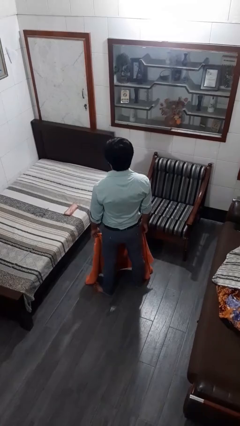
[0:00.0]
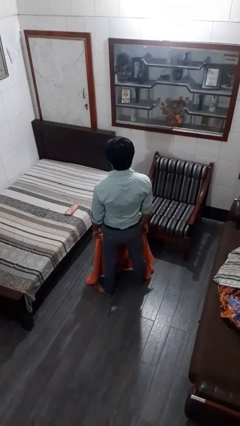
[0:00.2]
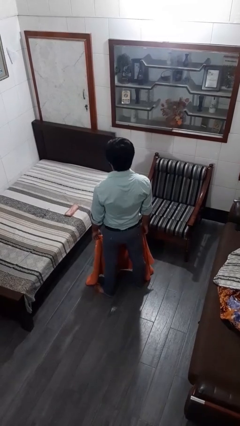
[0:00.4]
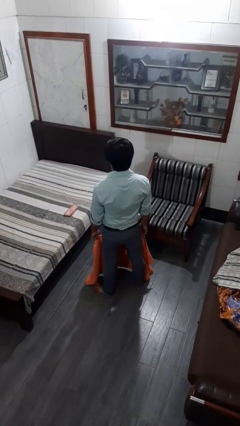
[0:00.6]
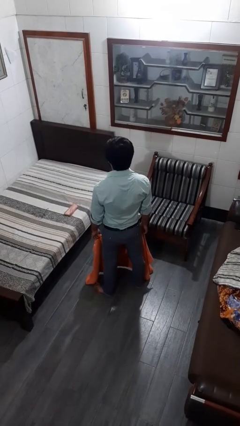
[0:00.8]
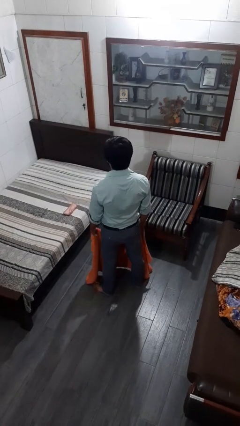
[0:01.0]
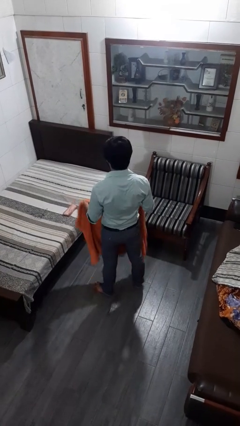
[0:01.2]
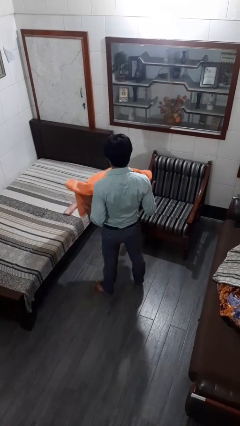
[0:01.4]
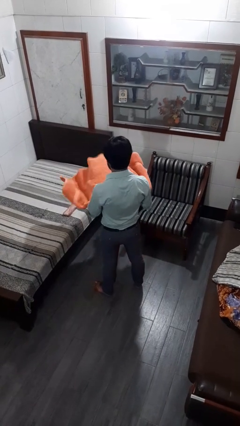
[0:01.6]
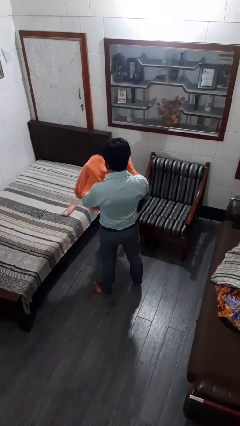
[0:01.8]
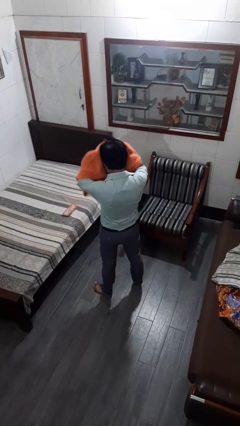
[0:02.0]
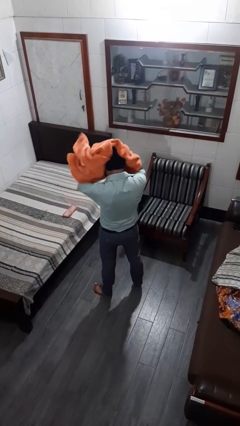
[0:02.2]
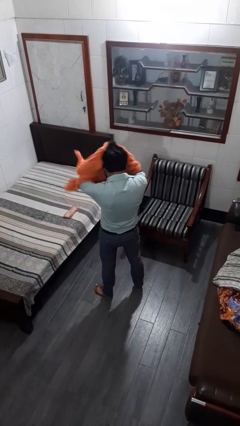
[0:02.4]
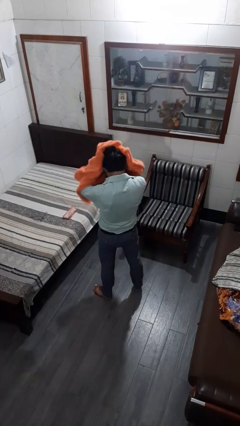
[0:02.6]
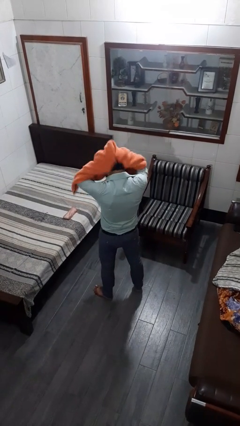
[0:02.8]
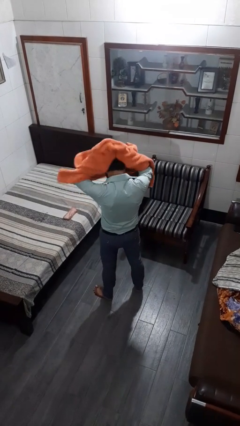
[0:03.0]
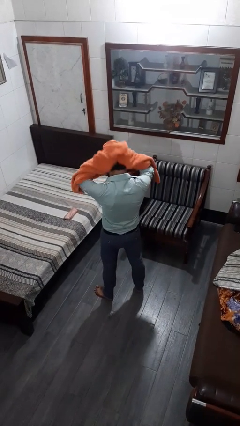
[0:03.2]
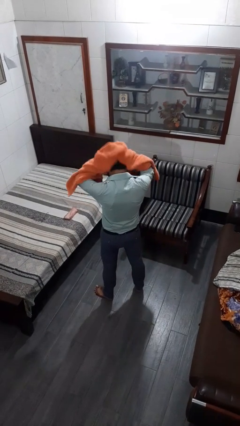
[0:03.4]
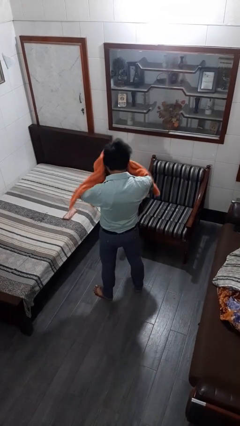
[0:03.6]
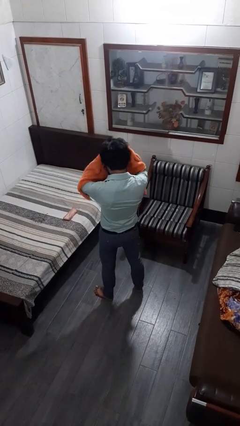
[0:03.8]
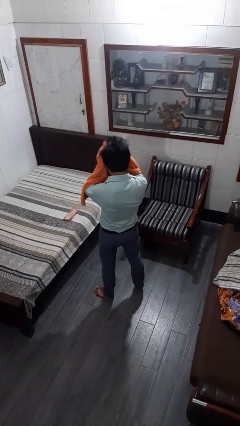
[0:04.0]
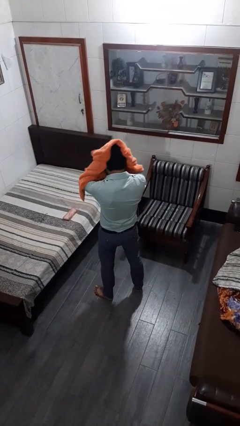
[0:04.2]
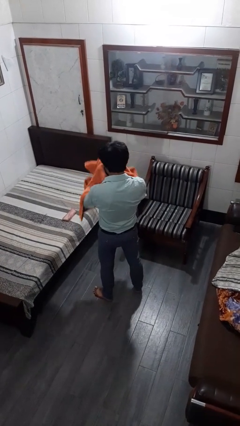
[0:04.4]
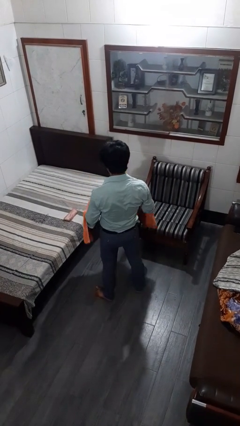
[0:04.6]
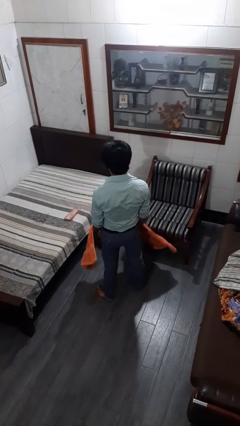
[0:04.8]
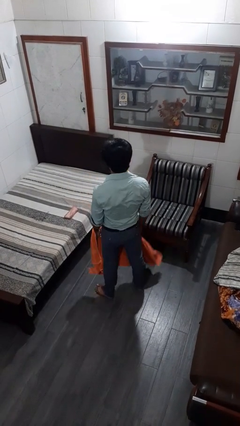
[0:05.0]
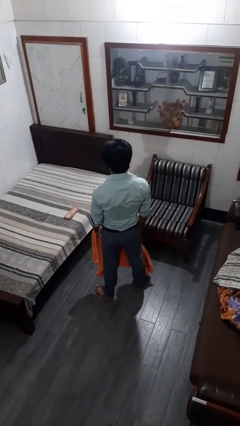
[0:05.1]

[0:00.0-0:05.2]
person dries hair with towel

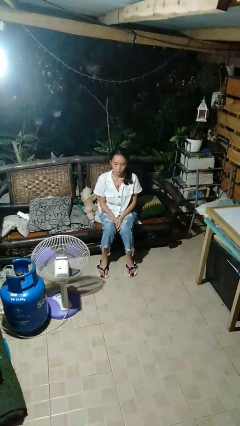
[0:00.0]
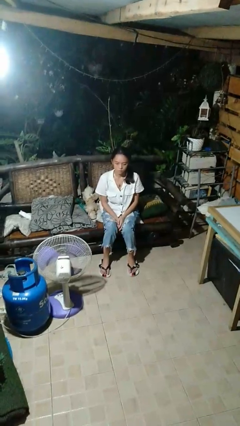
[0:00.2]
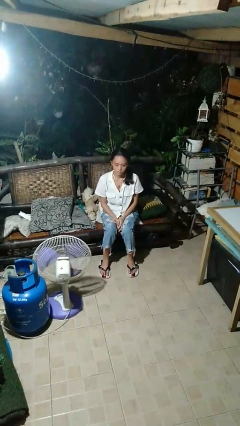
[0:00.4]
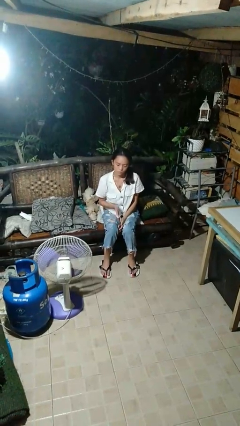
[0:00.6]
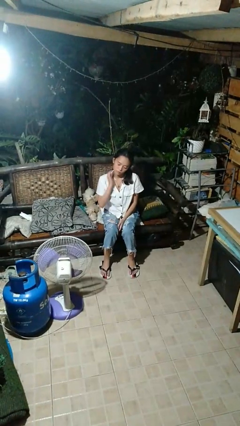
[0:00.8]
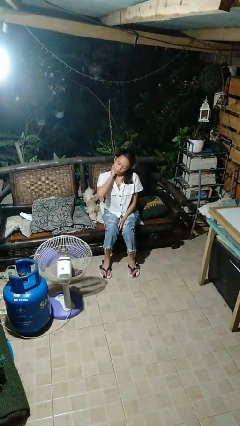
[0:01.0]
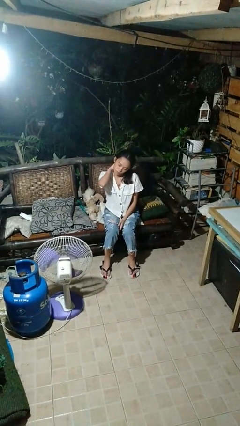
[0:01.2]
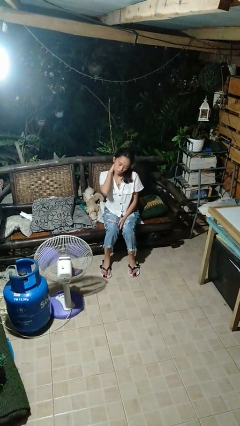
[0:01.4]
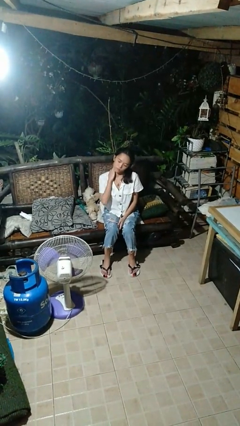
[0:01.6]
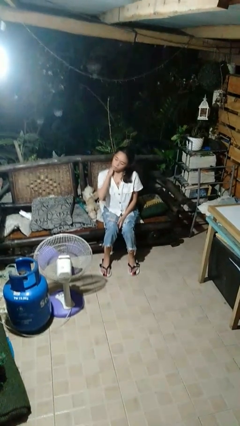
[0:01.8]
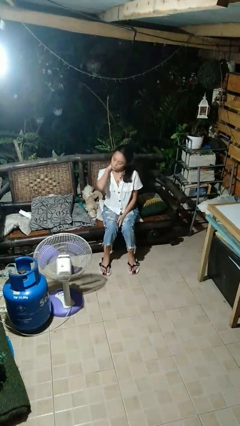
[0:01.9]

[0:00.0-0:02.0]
person rubs neck

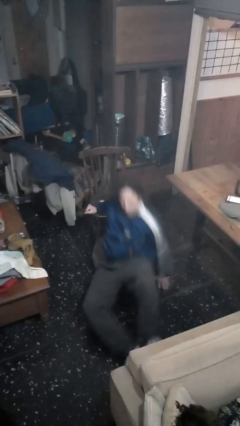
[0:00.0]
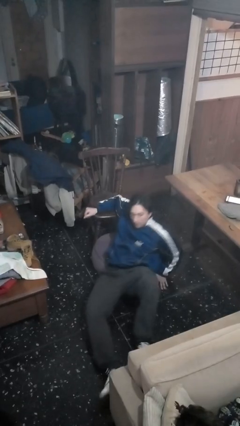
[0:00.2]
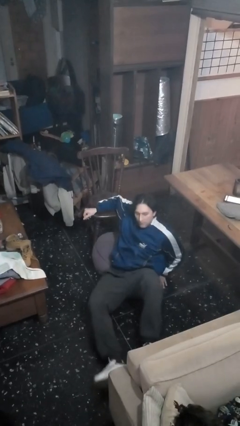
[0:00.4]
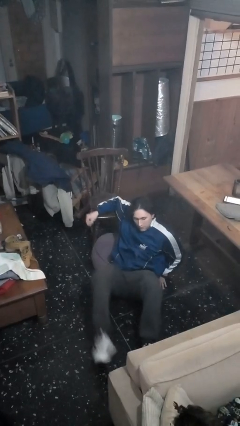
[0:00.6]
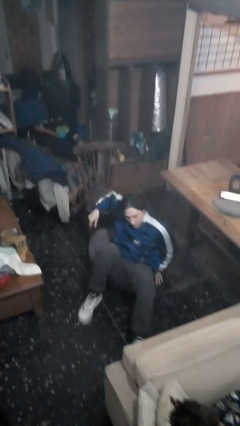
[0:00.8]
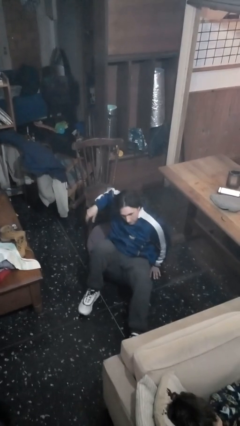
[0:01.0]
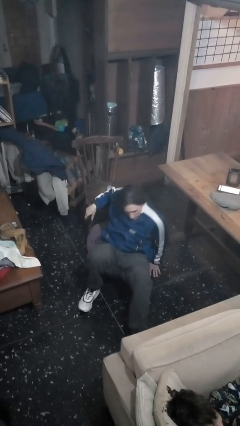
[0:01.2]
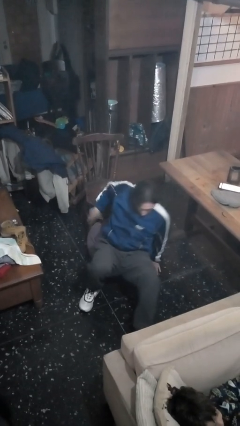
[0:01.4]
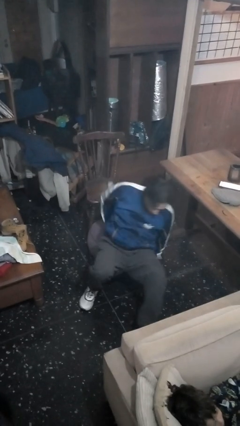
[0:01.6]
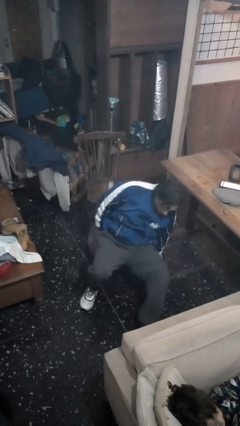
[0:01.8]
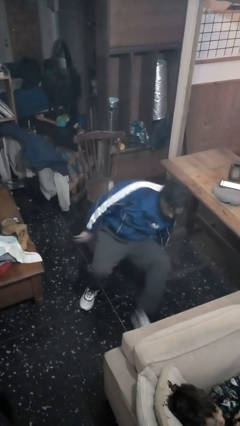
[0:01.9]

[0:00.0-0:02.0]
person falls from chair

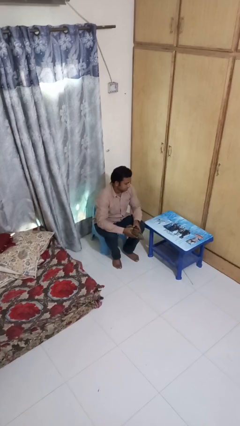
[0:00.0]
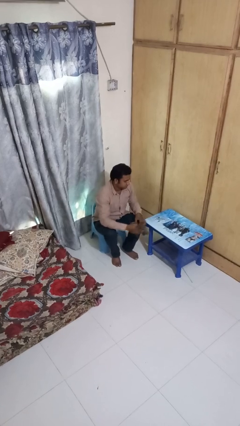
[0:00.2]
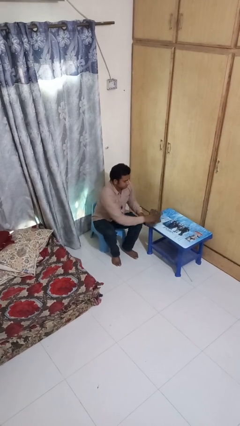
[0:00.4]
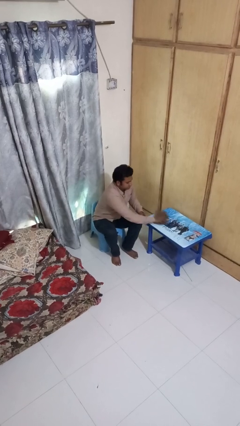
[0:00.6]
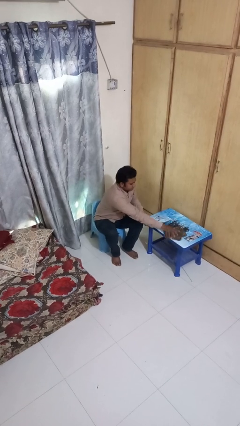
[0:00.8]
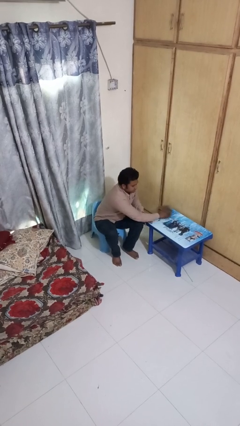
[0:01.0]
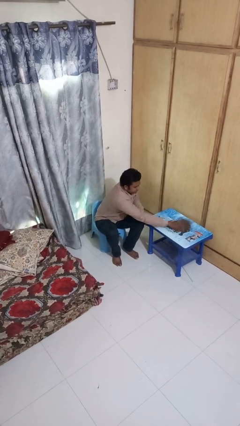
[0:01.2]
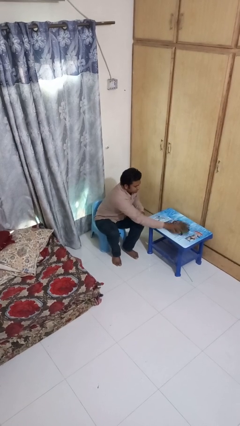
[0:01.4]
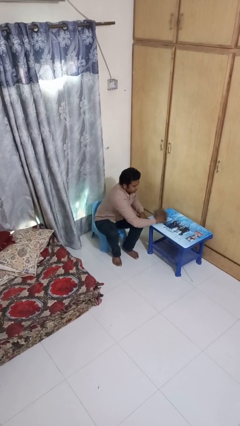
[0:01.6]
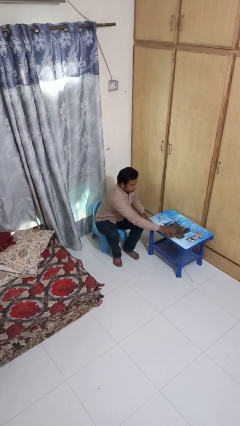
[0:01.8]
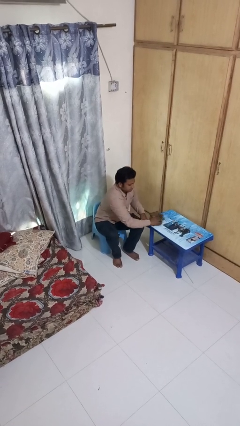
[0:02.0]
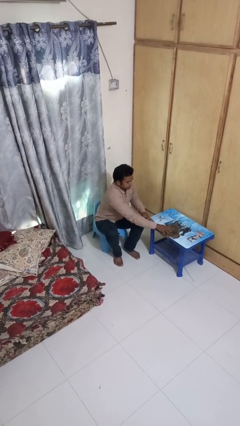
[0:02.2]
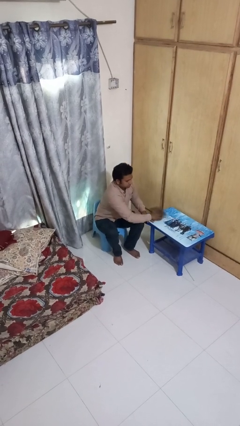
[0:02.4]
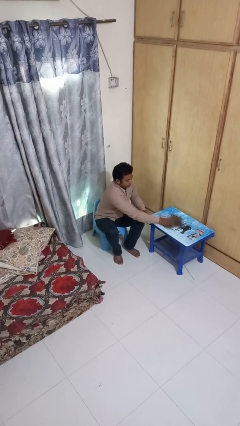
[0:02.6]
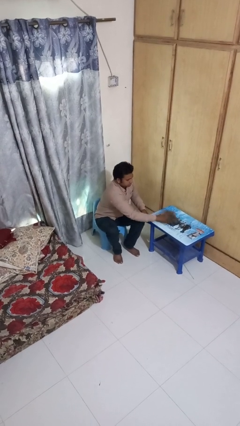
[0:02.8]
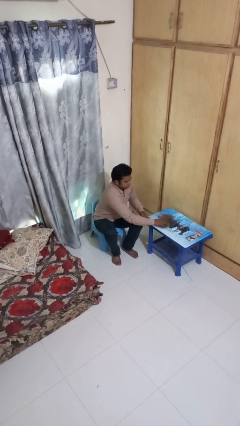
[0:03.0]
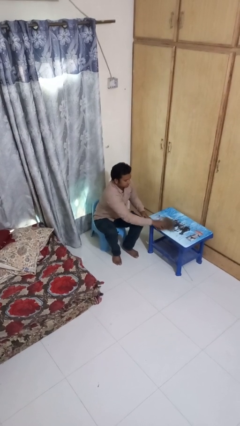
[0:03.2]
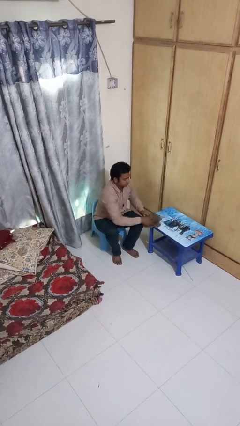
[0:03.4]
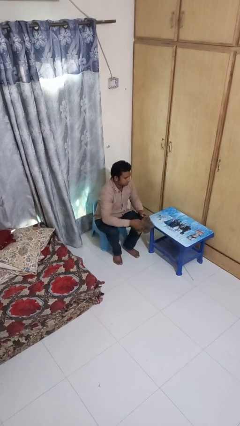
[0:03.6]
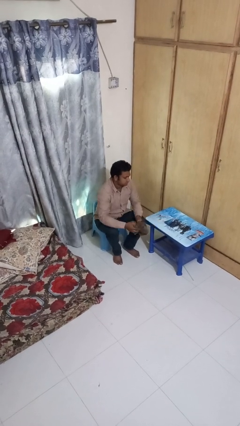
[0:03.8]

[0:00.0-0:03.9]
person cleans table with rag

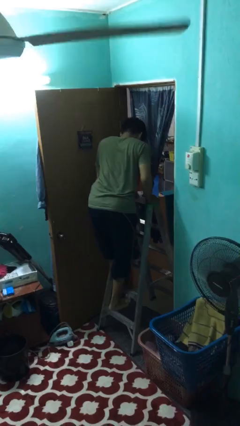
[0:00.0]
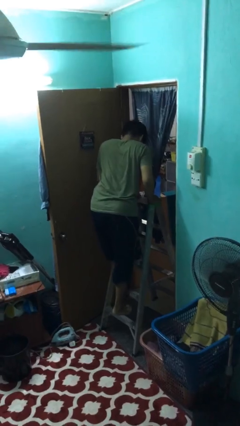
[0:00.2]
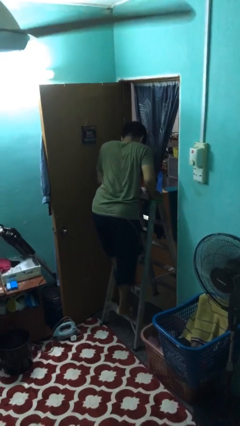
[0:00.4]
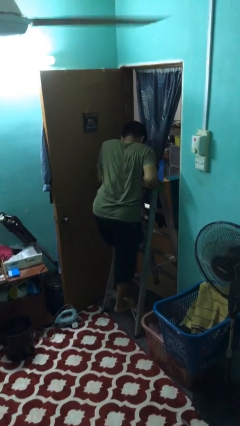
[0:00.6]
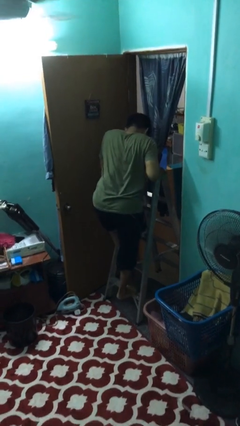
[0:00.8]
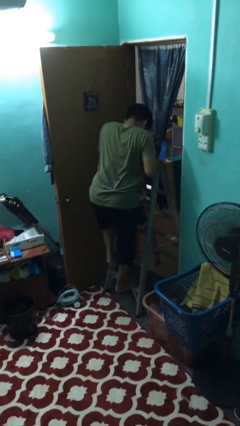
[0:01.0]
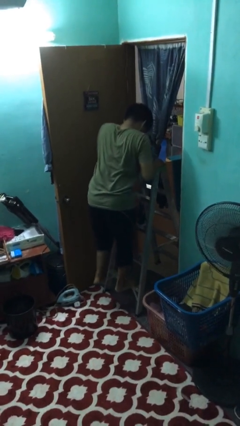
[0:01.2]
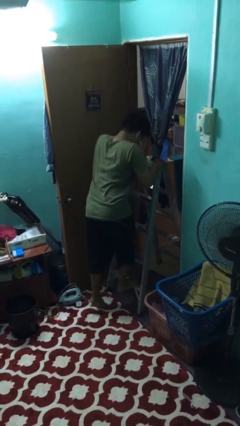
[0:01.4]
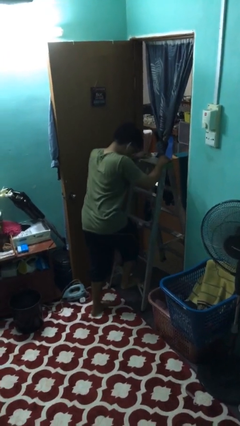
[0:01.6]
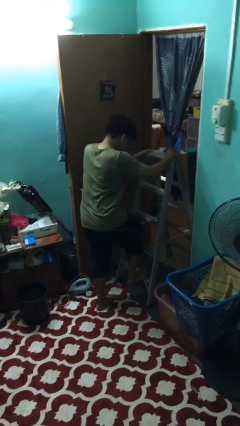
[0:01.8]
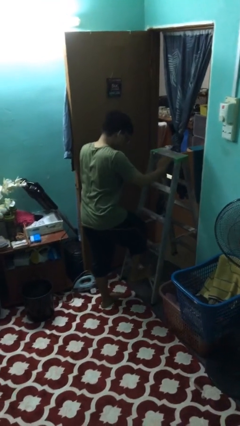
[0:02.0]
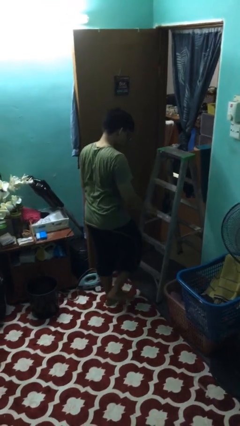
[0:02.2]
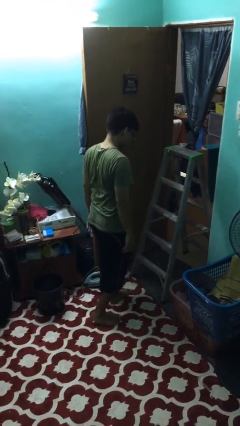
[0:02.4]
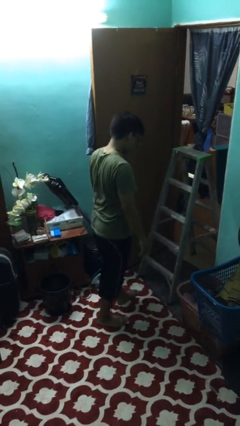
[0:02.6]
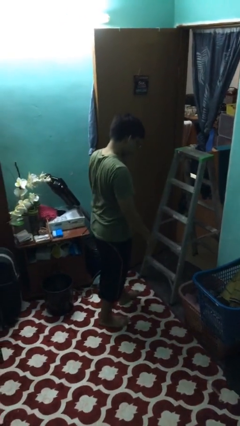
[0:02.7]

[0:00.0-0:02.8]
person climbs down ladder

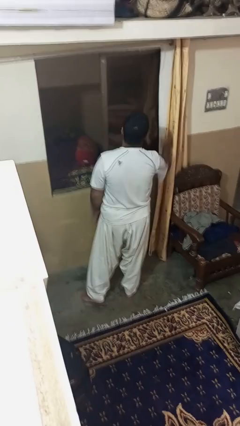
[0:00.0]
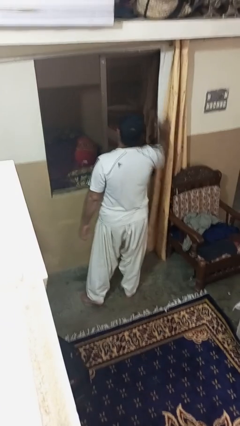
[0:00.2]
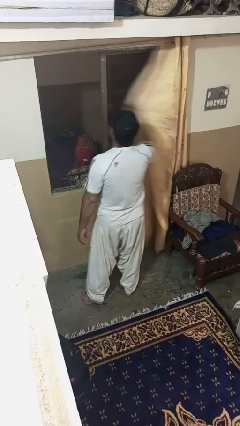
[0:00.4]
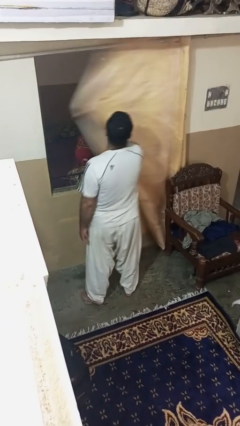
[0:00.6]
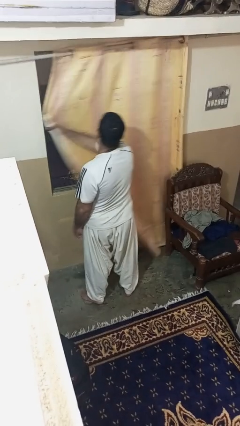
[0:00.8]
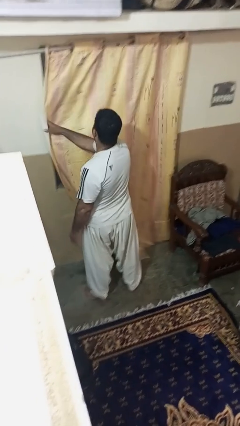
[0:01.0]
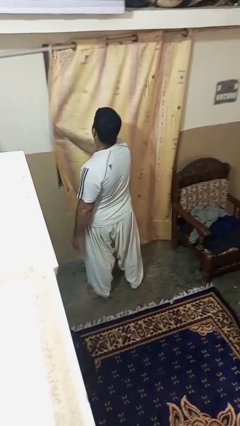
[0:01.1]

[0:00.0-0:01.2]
person closes curtains

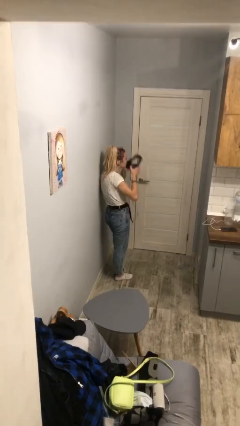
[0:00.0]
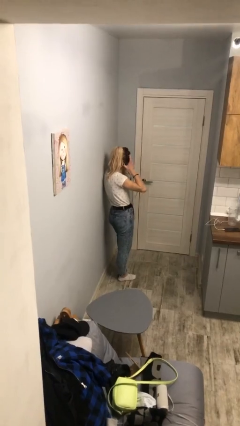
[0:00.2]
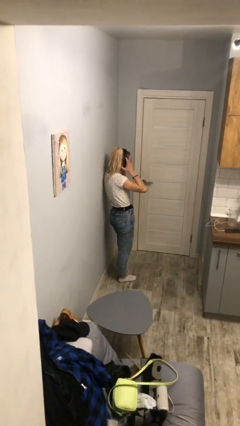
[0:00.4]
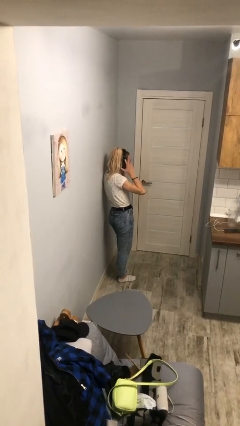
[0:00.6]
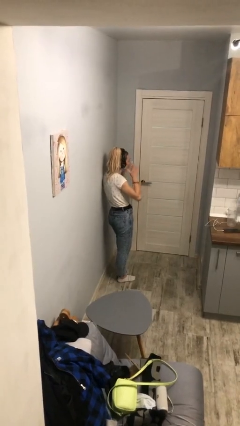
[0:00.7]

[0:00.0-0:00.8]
person puts on headphones
